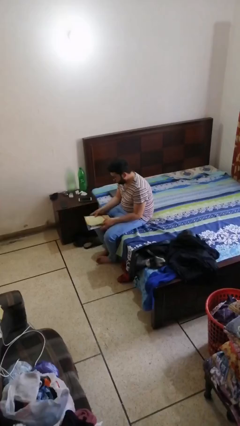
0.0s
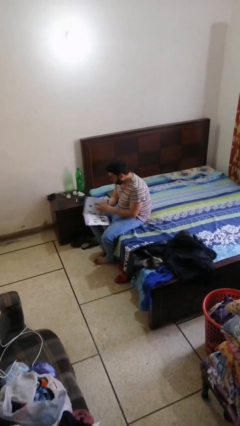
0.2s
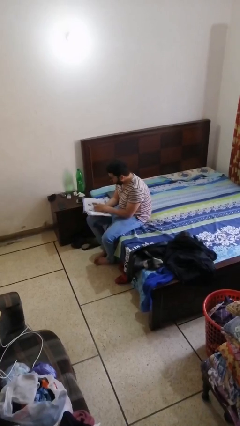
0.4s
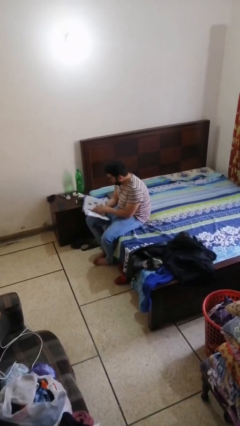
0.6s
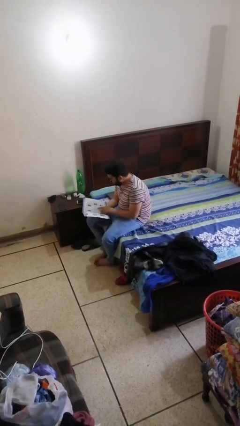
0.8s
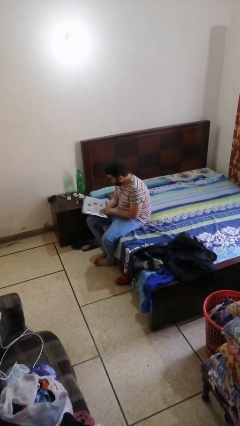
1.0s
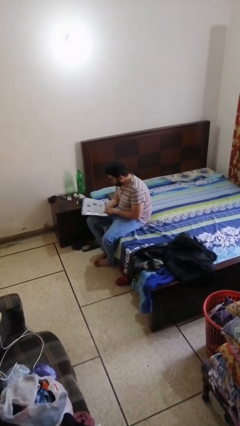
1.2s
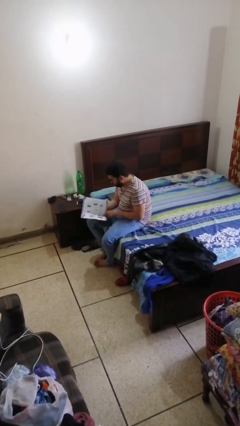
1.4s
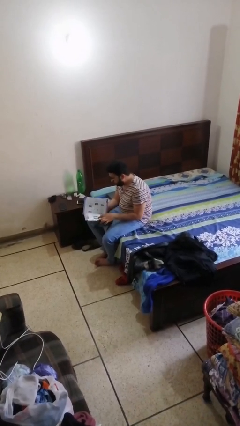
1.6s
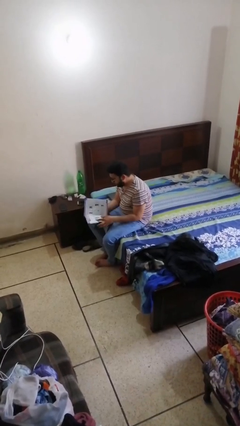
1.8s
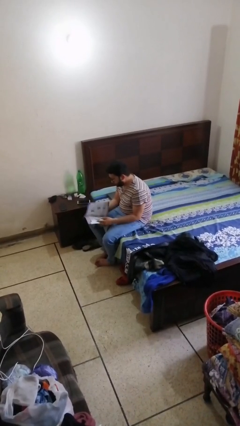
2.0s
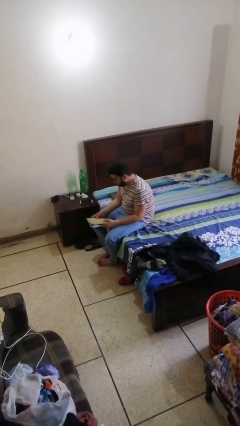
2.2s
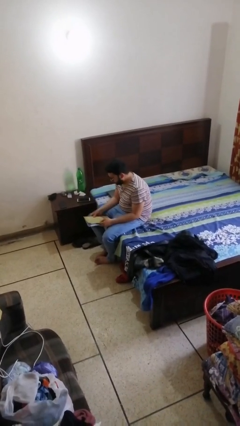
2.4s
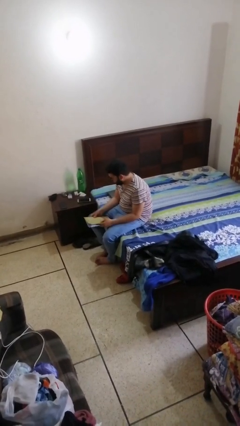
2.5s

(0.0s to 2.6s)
person reads document

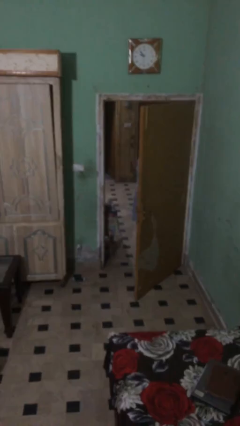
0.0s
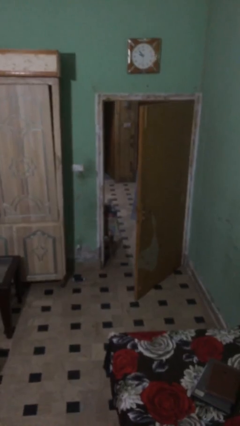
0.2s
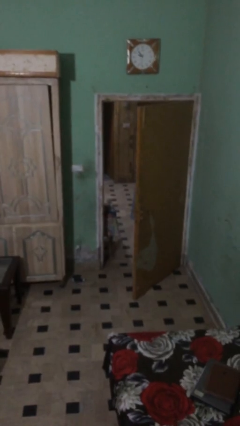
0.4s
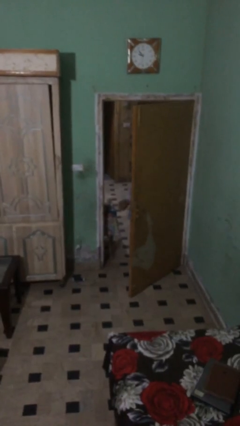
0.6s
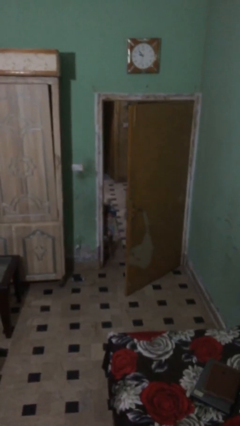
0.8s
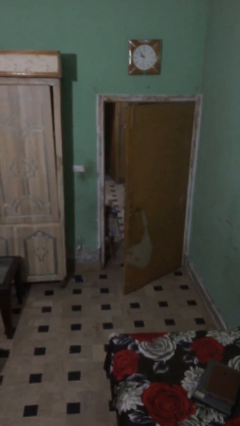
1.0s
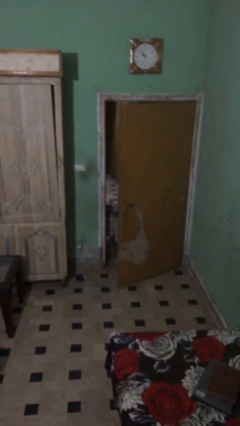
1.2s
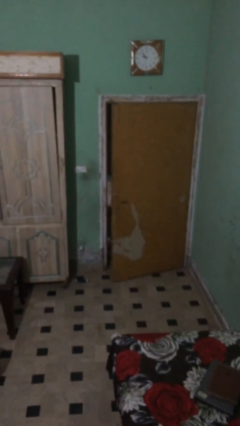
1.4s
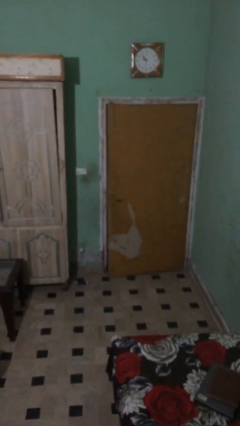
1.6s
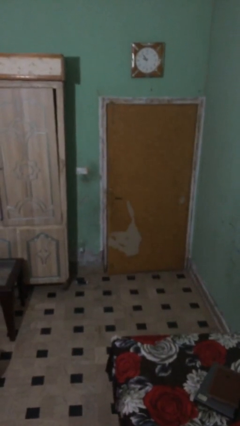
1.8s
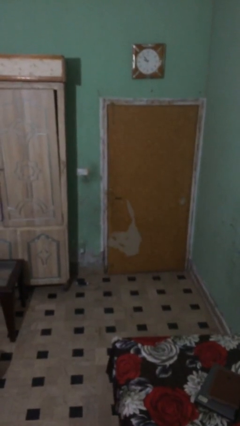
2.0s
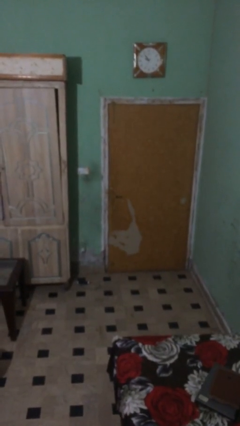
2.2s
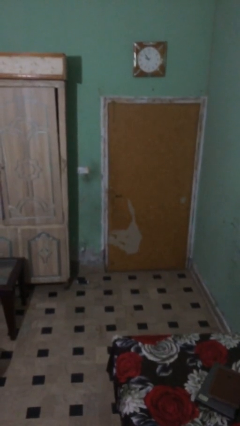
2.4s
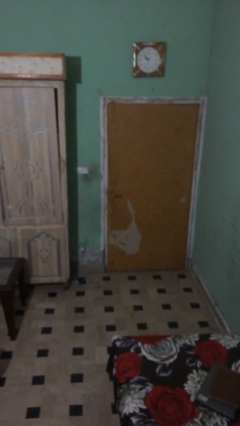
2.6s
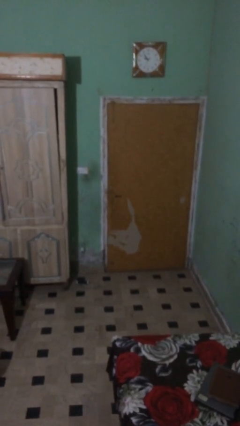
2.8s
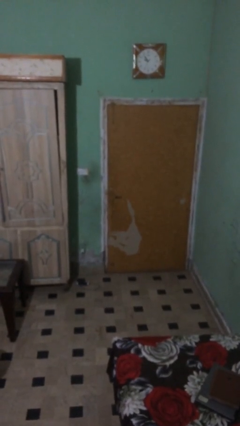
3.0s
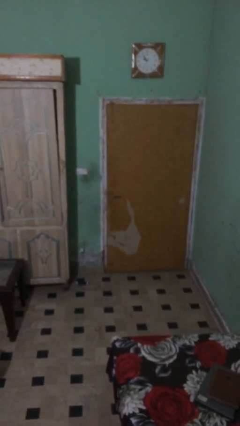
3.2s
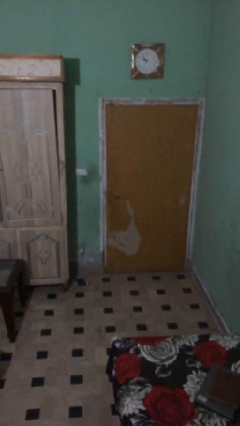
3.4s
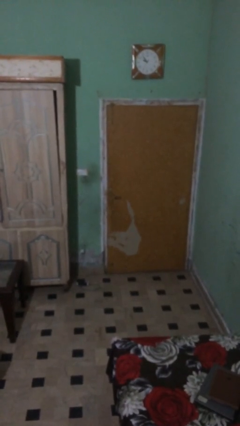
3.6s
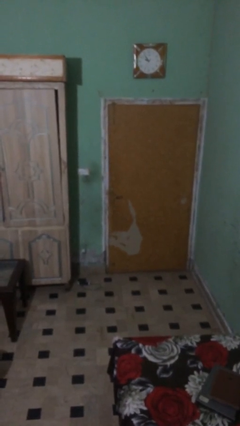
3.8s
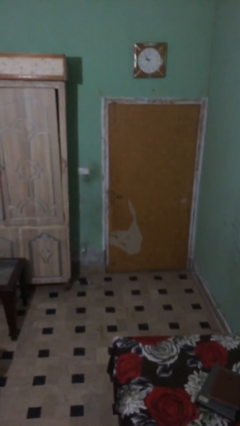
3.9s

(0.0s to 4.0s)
person closes facility door

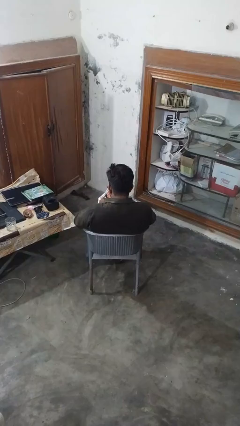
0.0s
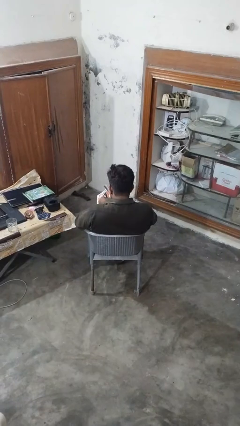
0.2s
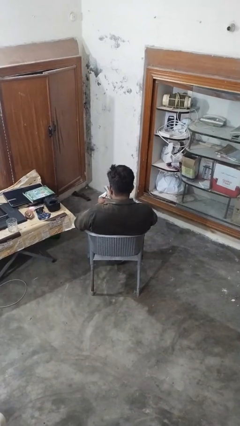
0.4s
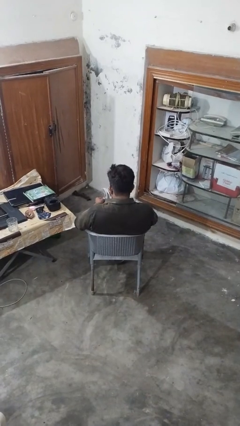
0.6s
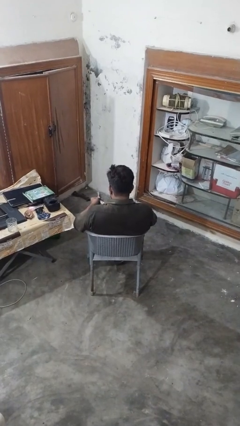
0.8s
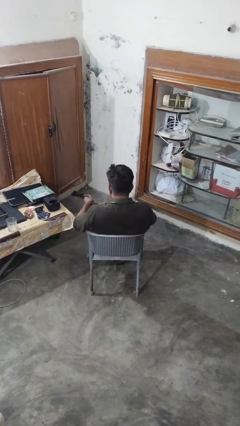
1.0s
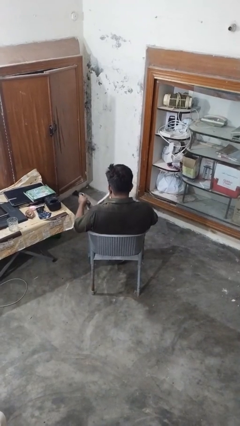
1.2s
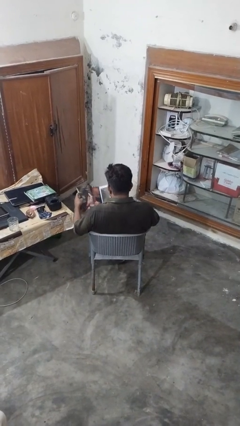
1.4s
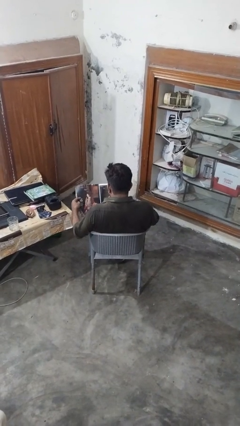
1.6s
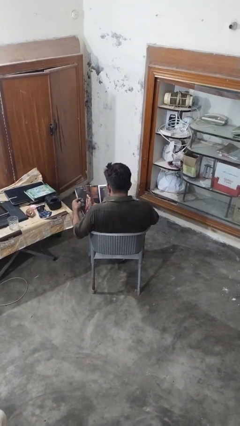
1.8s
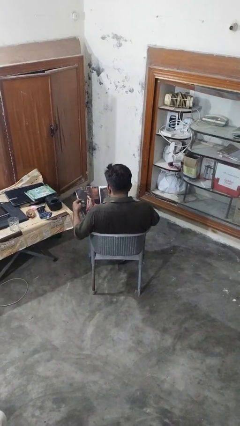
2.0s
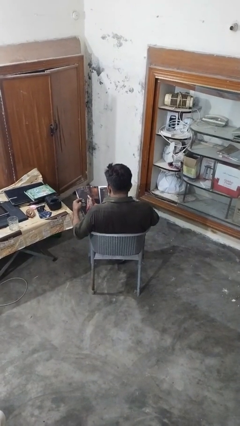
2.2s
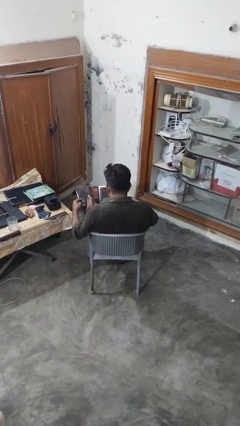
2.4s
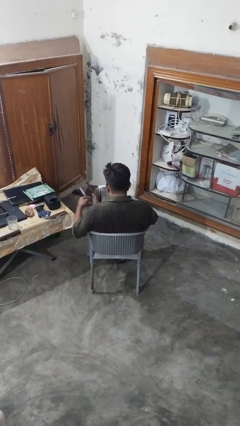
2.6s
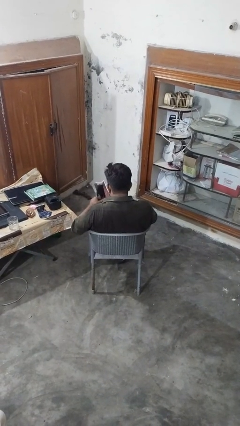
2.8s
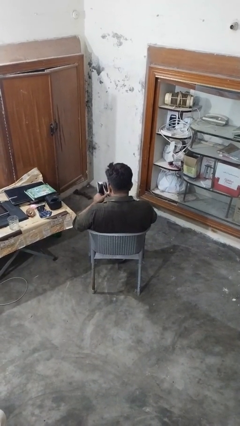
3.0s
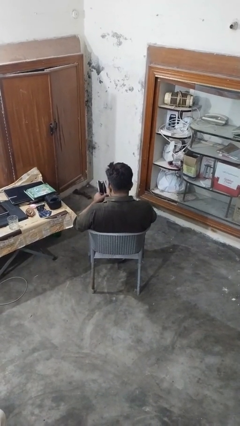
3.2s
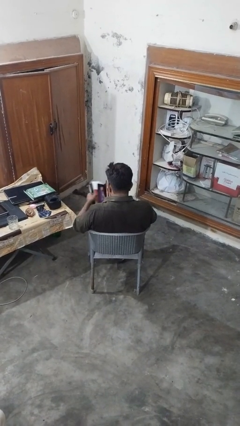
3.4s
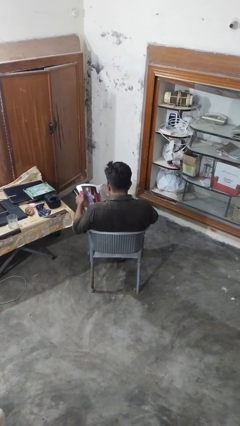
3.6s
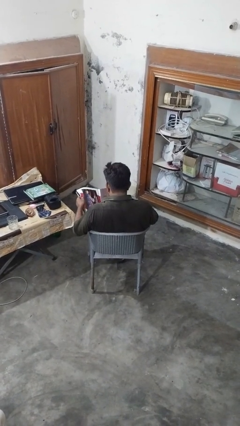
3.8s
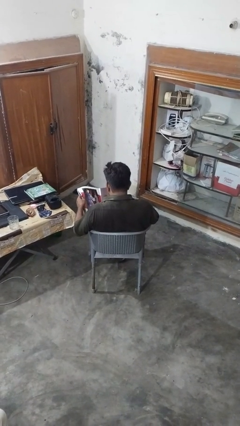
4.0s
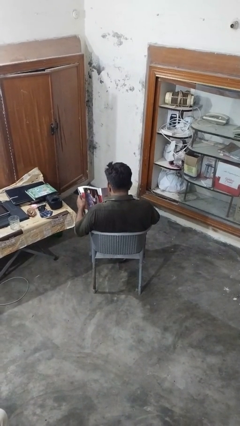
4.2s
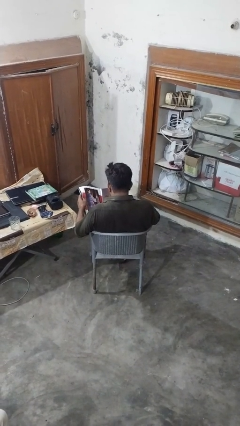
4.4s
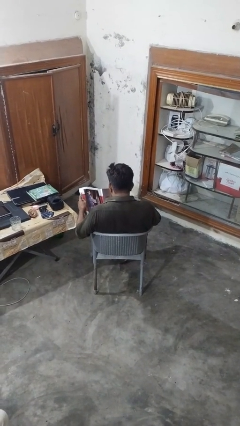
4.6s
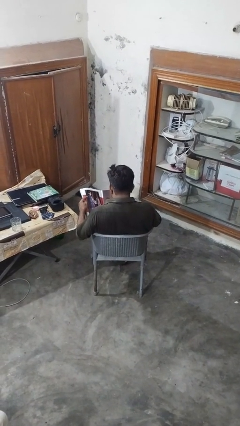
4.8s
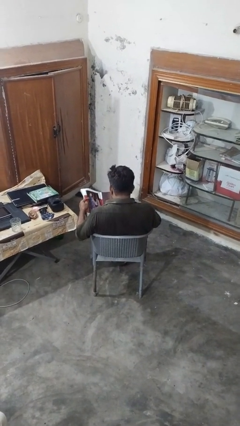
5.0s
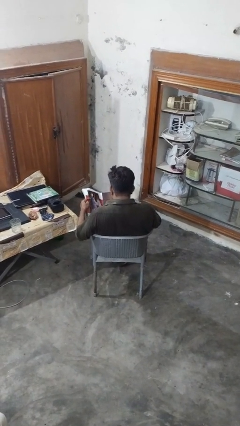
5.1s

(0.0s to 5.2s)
person reads magazine

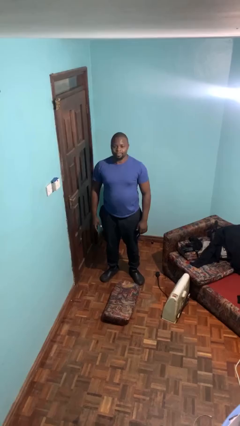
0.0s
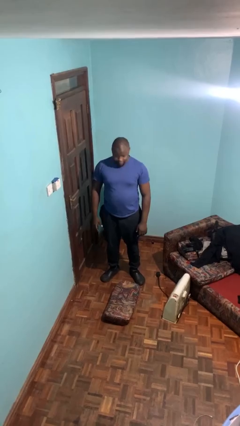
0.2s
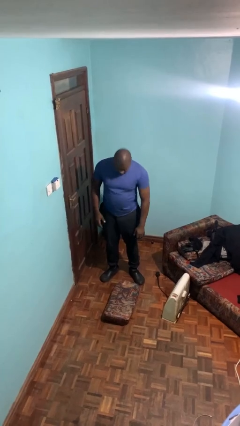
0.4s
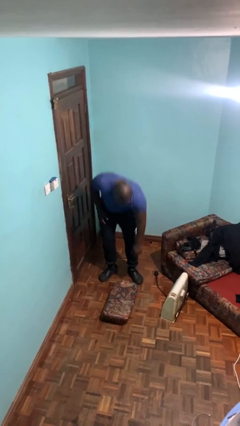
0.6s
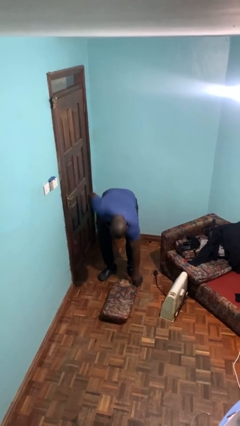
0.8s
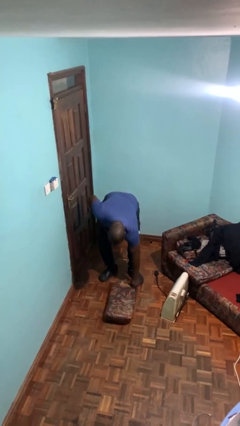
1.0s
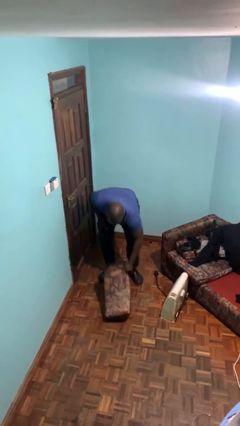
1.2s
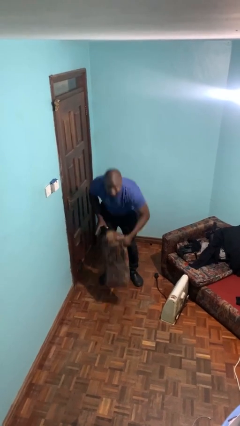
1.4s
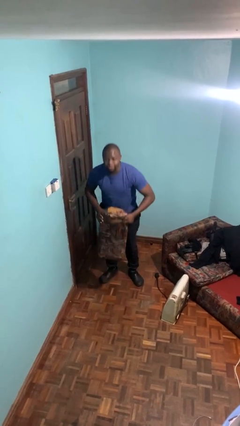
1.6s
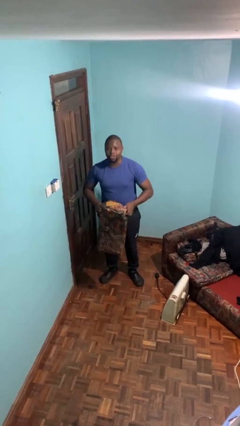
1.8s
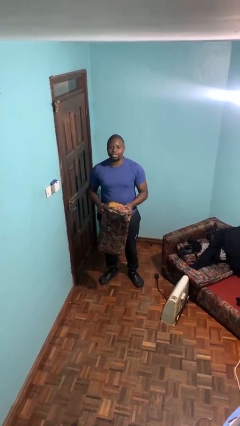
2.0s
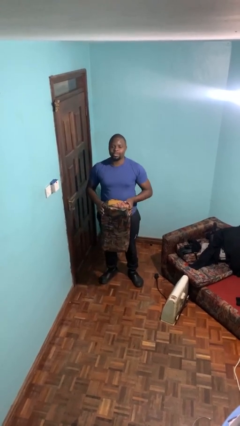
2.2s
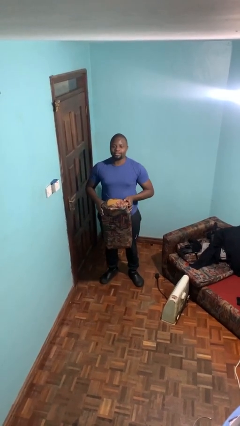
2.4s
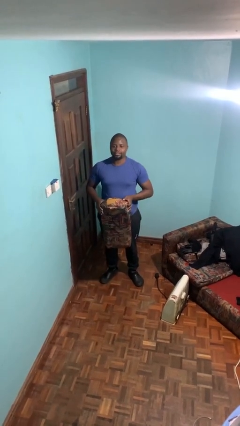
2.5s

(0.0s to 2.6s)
person picks up object from floor

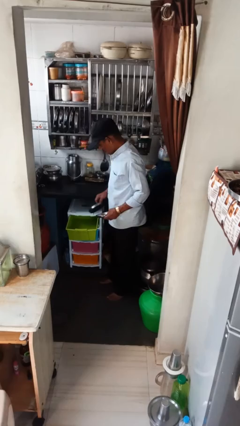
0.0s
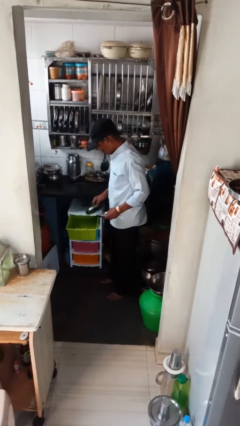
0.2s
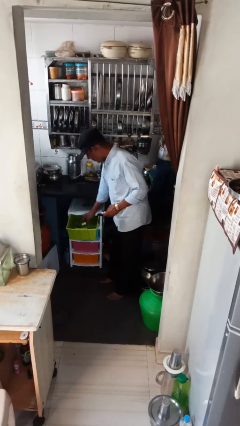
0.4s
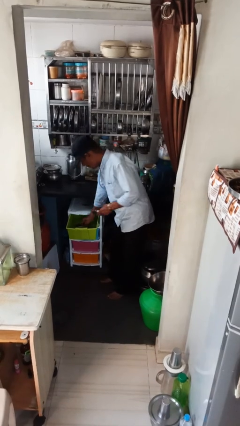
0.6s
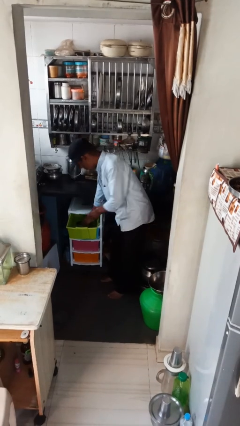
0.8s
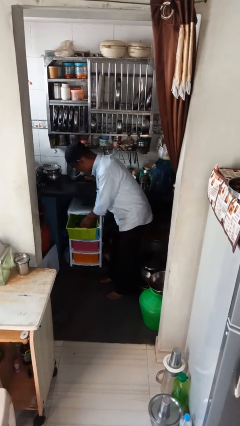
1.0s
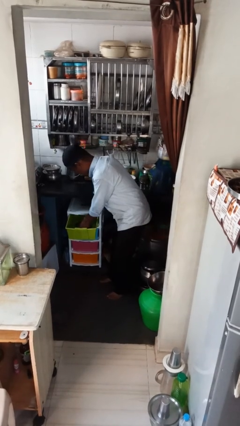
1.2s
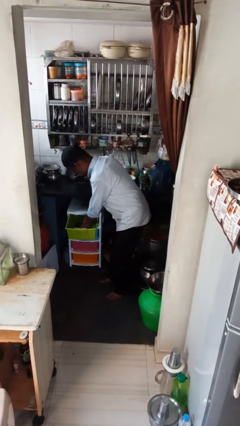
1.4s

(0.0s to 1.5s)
person puts object in cabinet

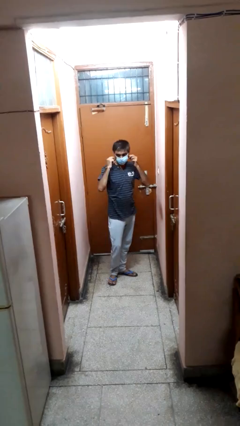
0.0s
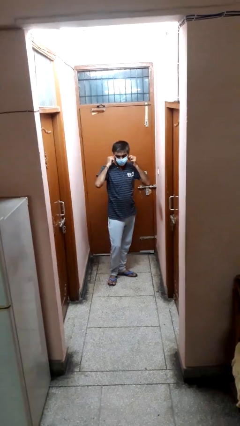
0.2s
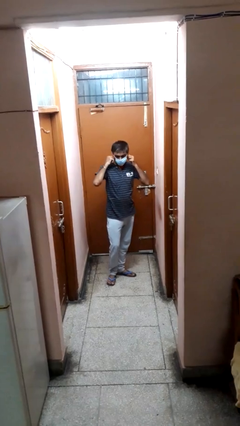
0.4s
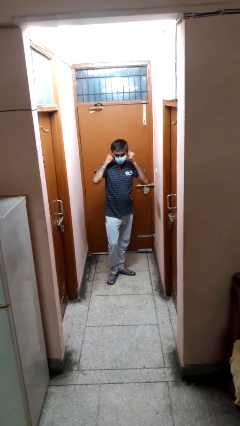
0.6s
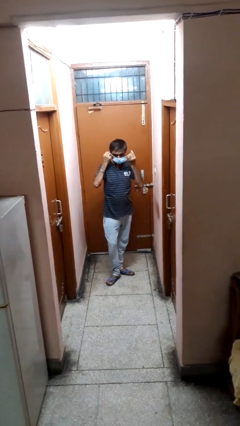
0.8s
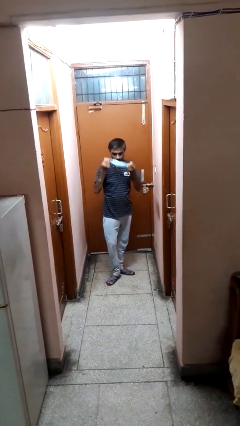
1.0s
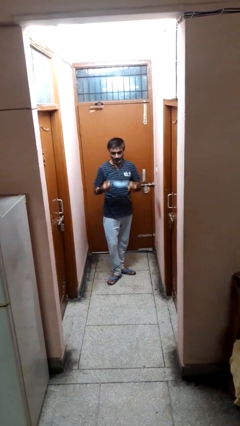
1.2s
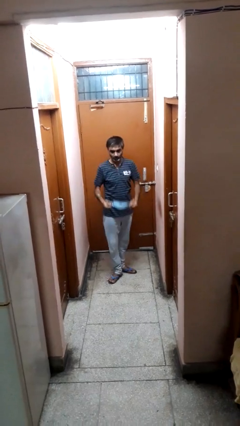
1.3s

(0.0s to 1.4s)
person takes off facemask
